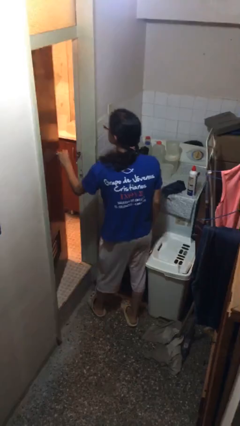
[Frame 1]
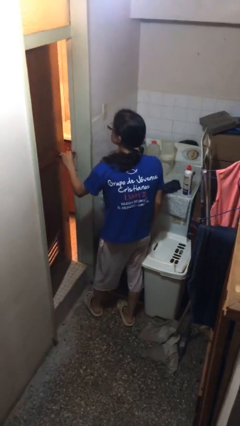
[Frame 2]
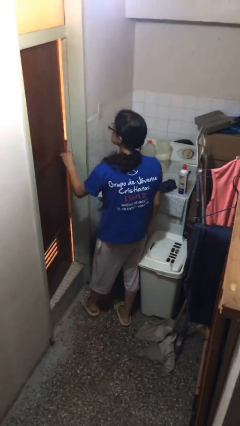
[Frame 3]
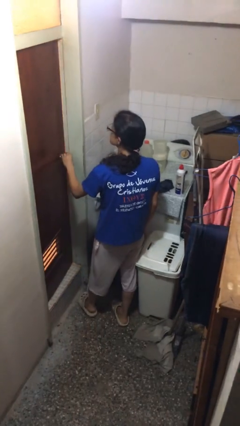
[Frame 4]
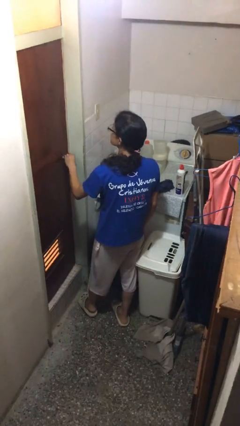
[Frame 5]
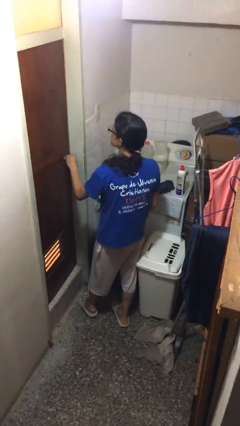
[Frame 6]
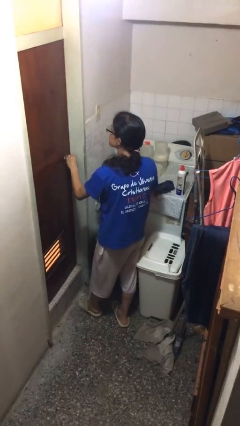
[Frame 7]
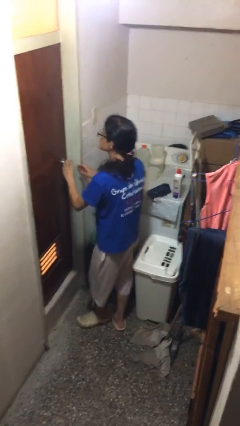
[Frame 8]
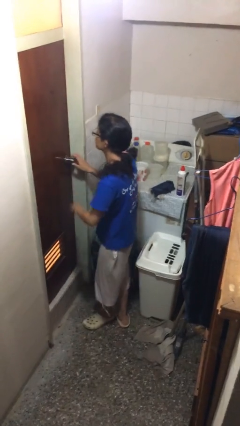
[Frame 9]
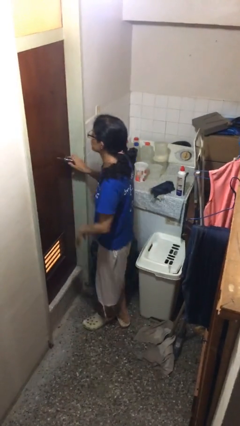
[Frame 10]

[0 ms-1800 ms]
person closes facility door

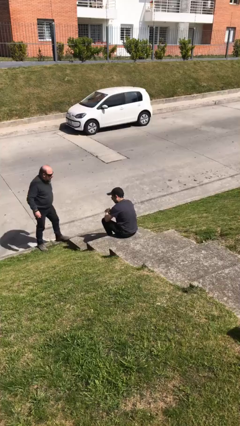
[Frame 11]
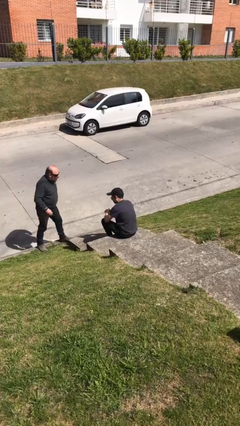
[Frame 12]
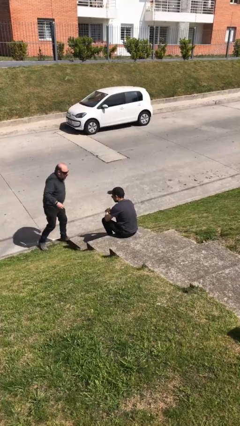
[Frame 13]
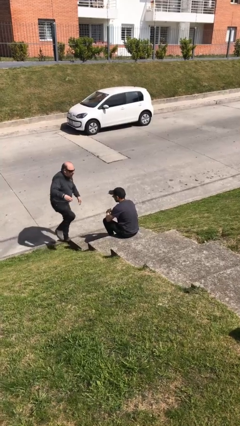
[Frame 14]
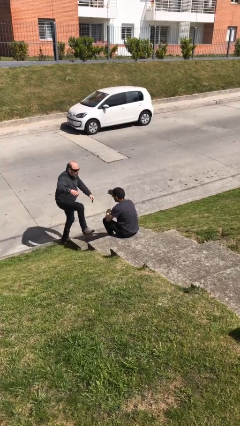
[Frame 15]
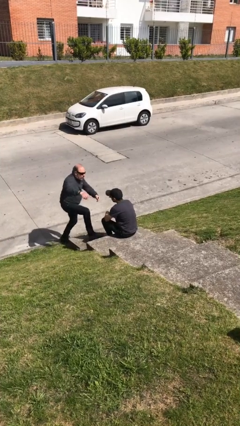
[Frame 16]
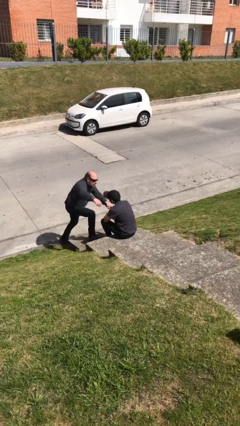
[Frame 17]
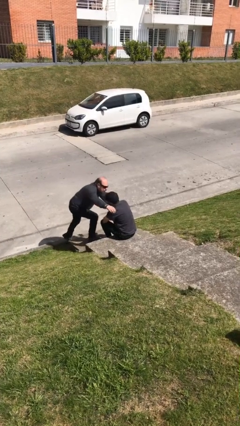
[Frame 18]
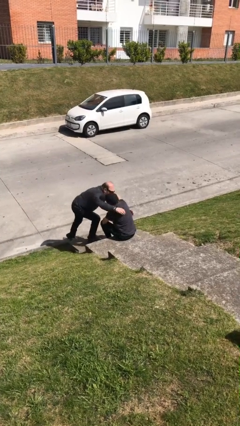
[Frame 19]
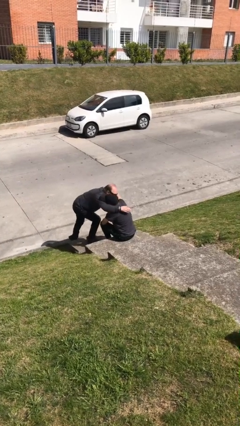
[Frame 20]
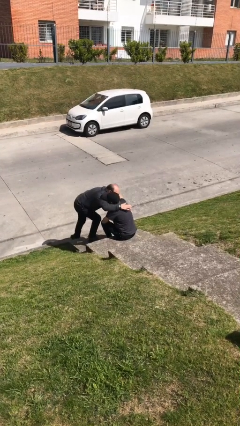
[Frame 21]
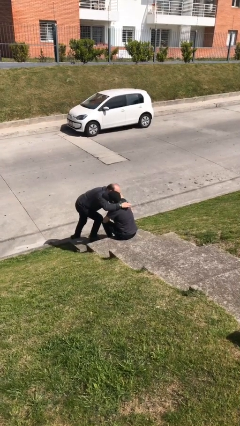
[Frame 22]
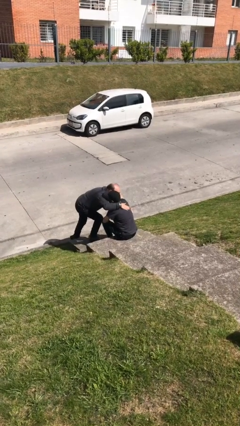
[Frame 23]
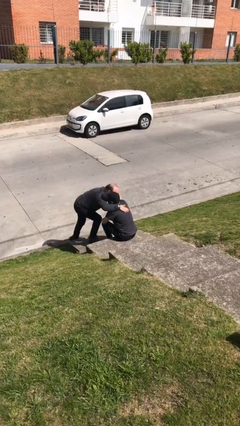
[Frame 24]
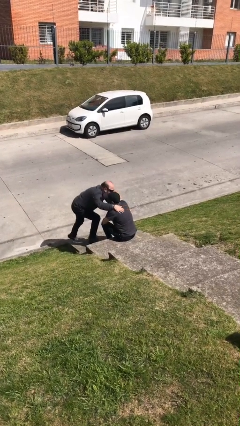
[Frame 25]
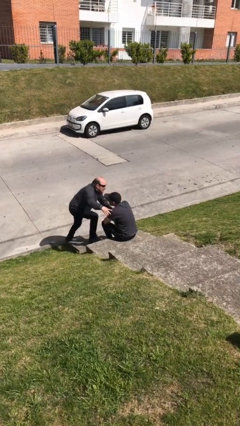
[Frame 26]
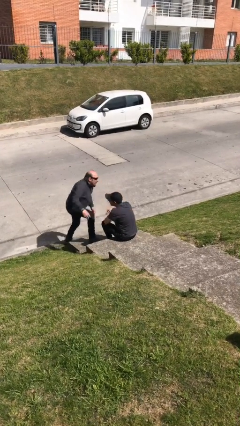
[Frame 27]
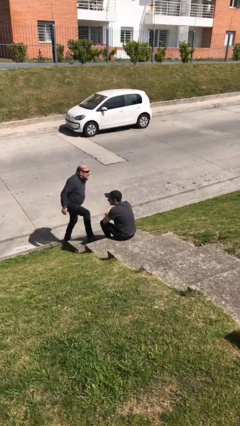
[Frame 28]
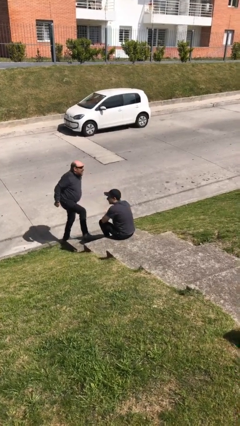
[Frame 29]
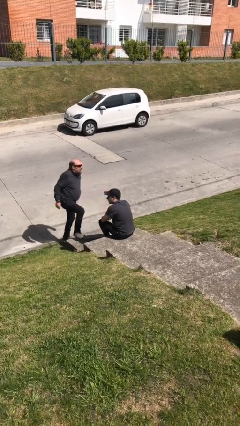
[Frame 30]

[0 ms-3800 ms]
person embraces person

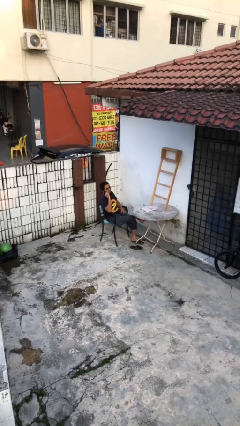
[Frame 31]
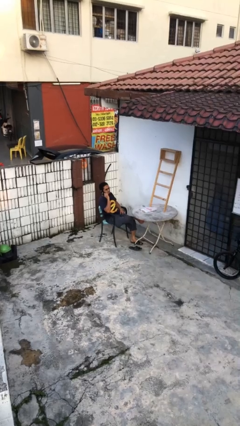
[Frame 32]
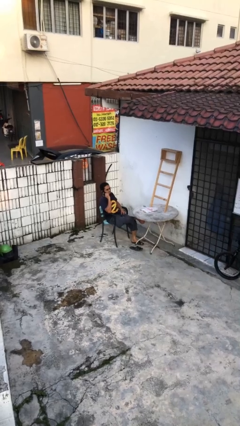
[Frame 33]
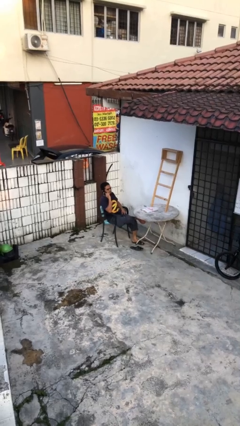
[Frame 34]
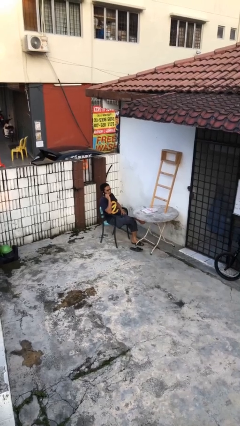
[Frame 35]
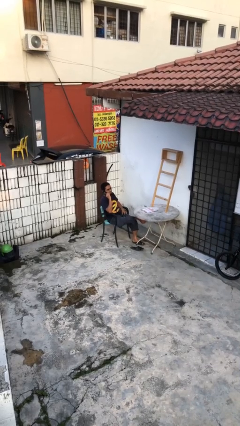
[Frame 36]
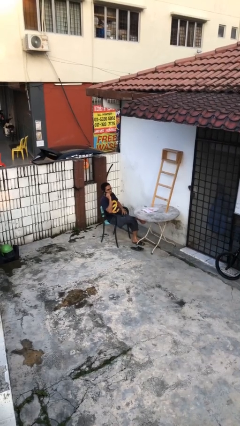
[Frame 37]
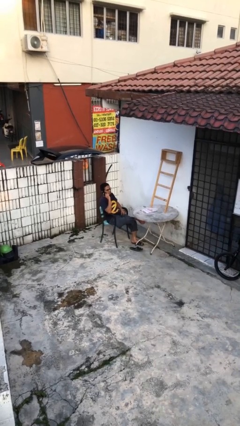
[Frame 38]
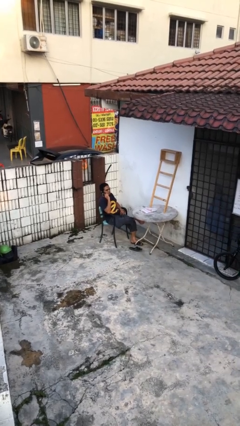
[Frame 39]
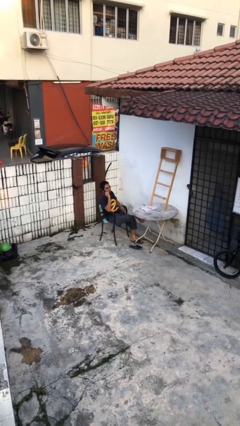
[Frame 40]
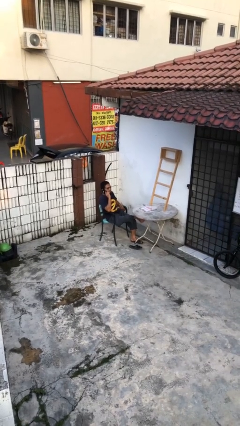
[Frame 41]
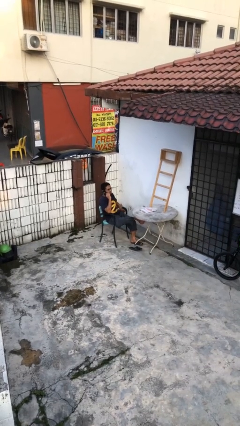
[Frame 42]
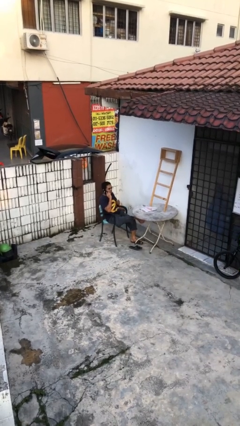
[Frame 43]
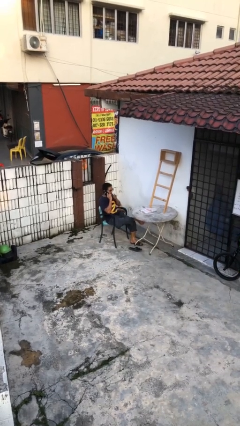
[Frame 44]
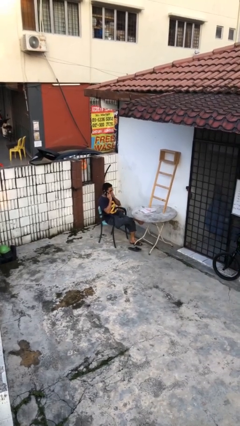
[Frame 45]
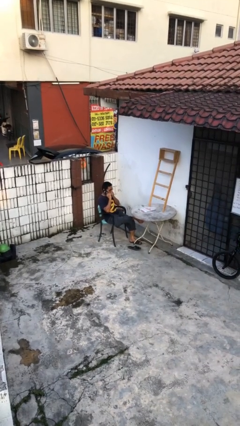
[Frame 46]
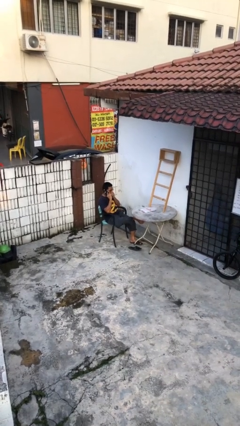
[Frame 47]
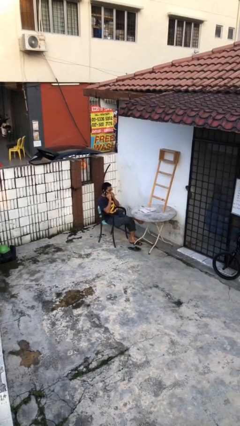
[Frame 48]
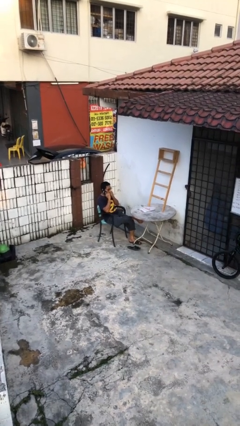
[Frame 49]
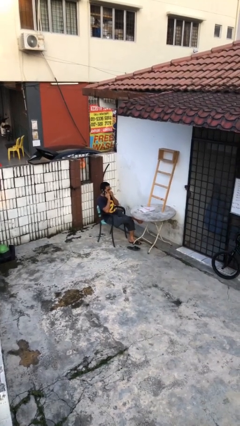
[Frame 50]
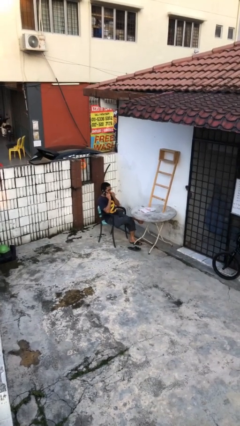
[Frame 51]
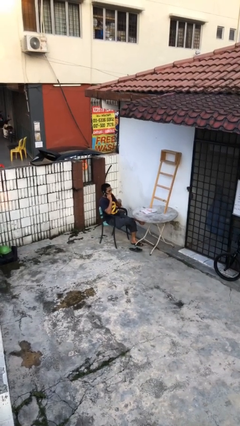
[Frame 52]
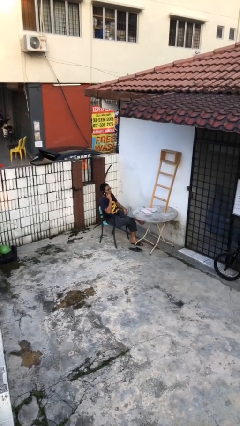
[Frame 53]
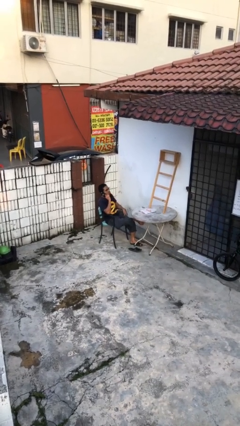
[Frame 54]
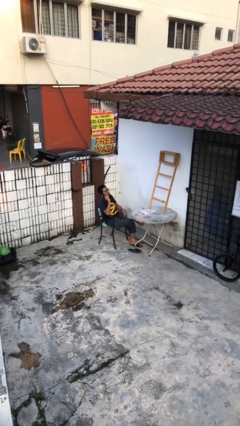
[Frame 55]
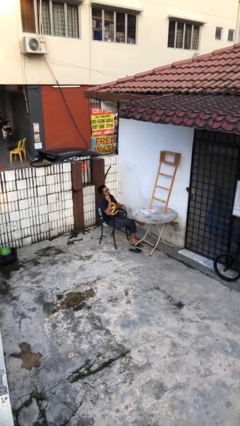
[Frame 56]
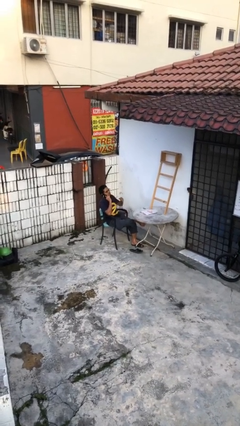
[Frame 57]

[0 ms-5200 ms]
person talks on phone

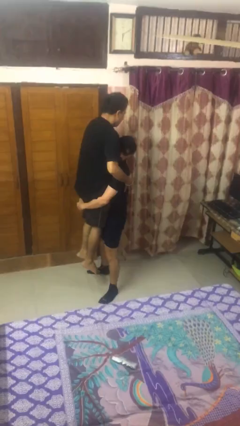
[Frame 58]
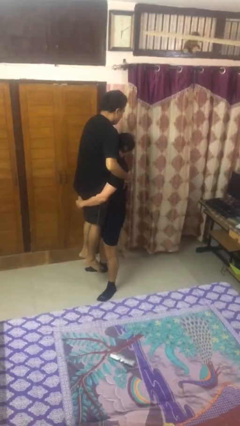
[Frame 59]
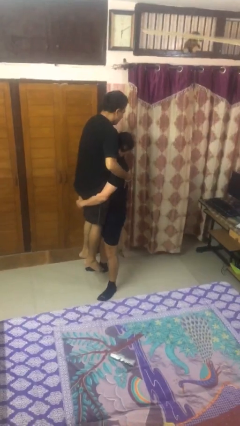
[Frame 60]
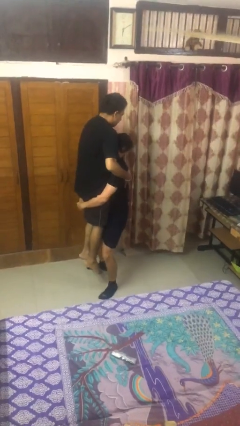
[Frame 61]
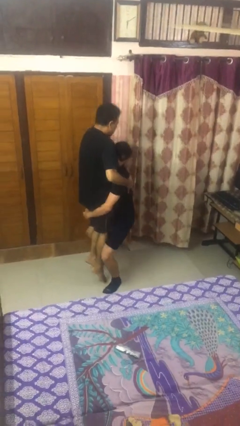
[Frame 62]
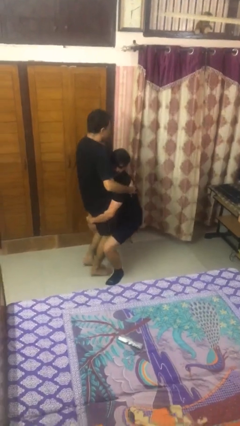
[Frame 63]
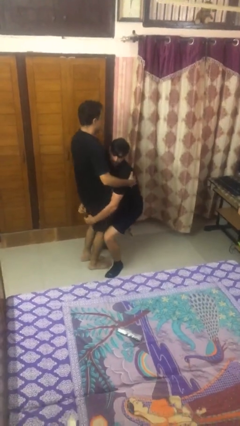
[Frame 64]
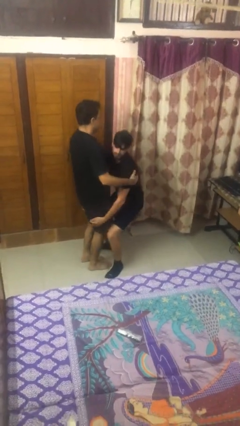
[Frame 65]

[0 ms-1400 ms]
person puts down person

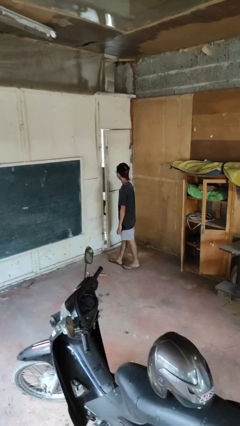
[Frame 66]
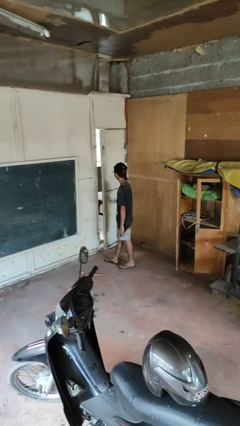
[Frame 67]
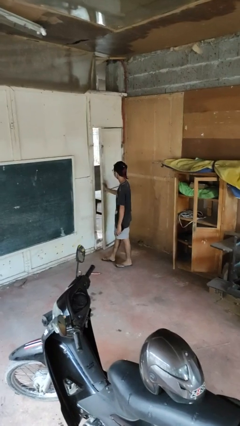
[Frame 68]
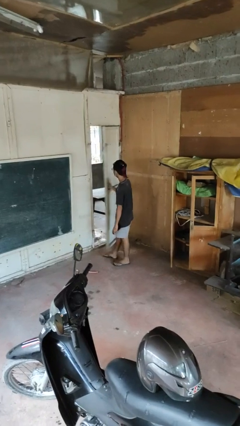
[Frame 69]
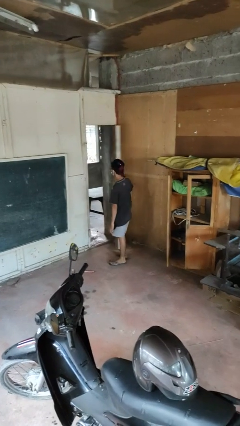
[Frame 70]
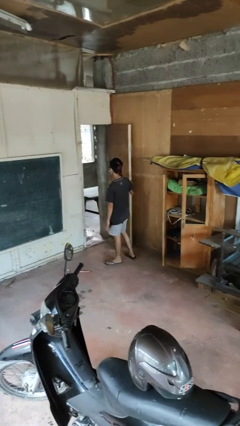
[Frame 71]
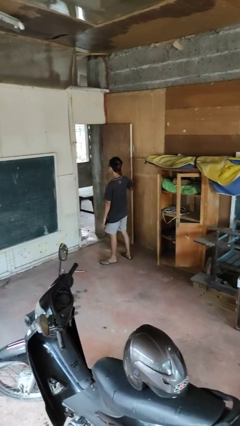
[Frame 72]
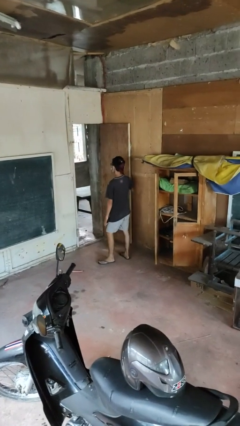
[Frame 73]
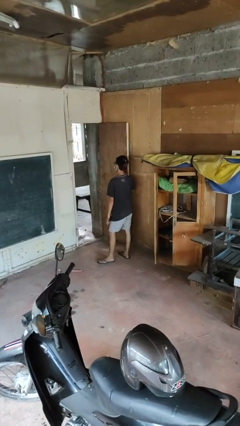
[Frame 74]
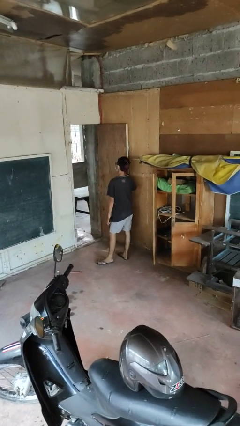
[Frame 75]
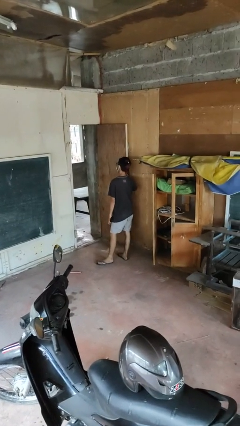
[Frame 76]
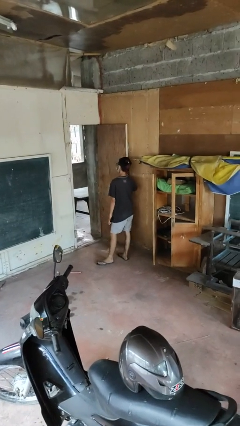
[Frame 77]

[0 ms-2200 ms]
person opens facility door

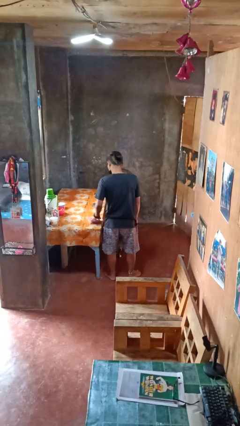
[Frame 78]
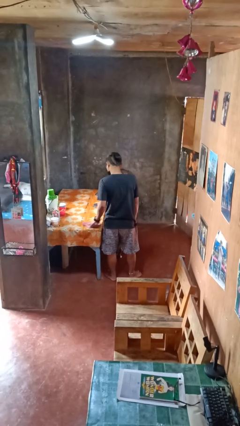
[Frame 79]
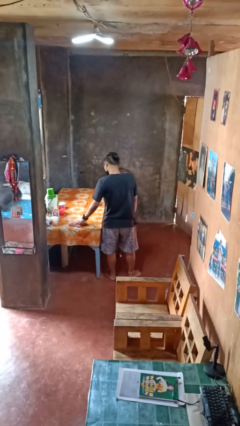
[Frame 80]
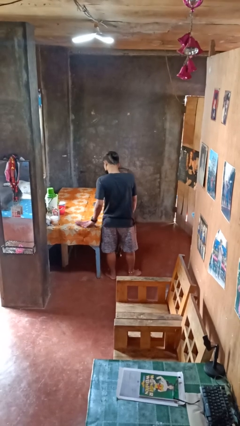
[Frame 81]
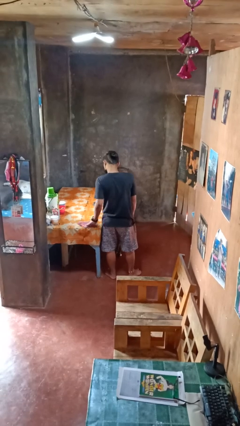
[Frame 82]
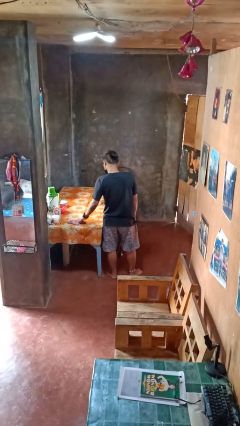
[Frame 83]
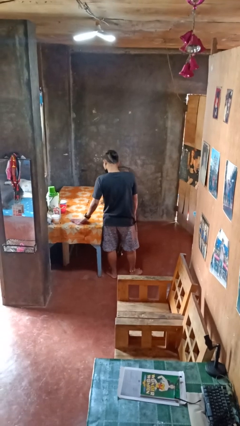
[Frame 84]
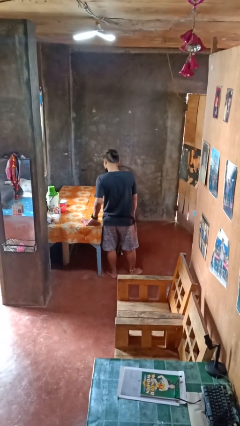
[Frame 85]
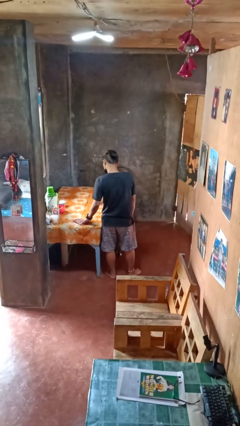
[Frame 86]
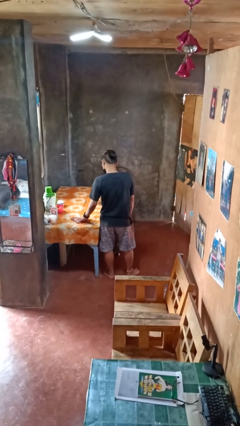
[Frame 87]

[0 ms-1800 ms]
person cleans table with rag

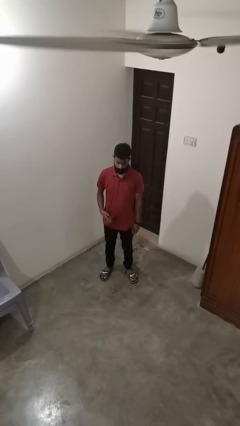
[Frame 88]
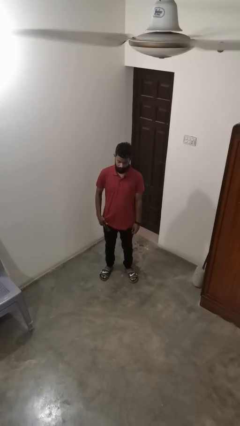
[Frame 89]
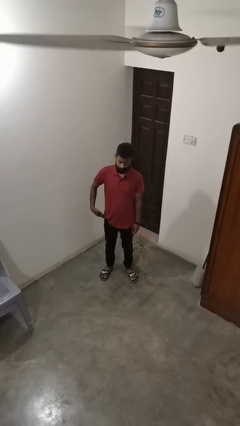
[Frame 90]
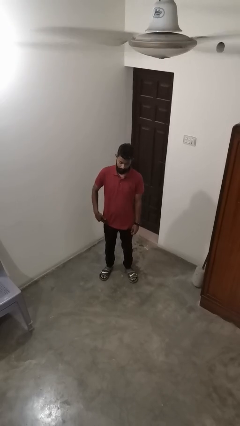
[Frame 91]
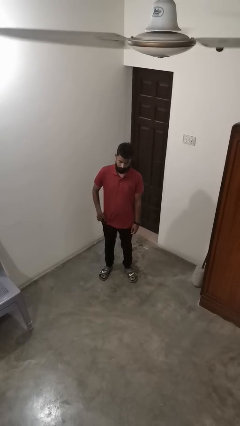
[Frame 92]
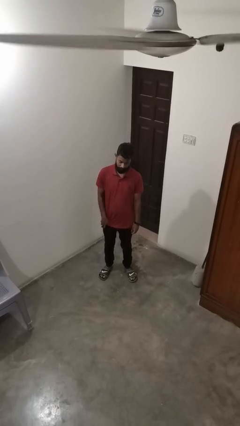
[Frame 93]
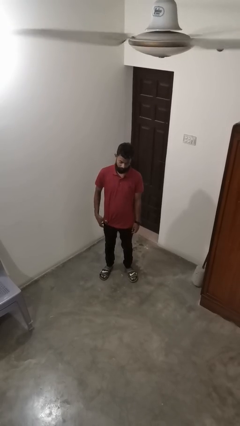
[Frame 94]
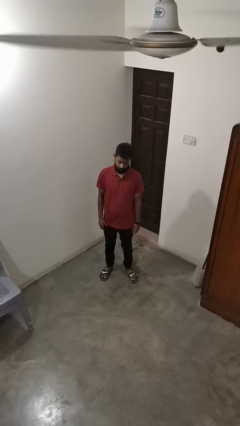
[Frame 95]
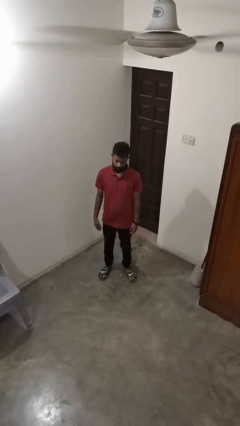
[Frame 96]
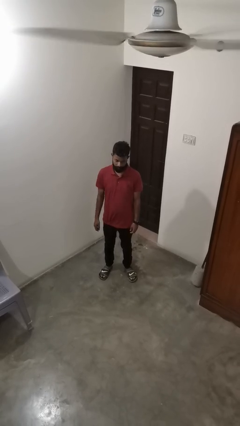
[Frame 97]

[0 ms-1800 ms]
person puts phone into pocket
